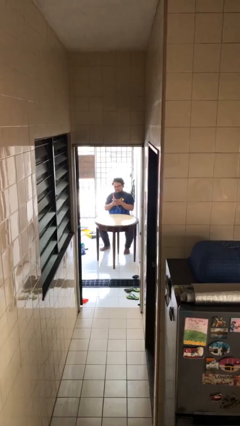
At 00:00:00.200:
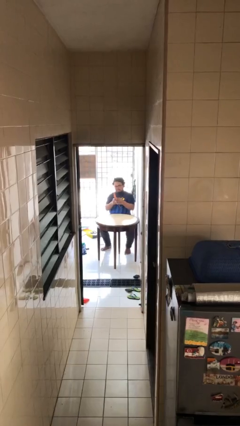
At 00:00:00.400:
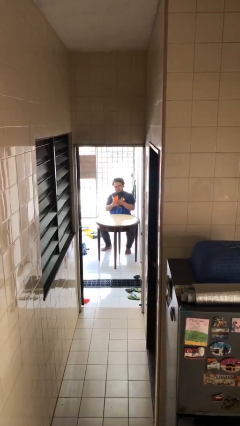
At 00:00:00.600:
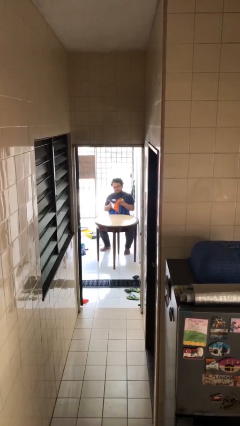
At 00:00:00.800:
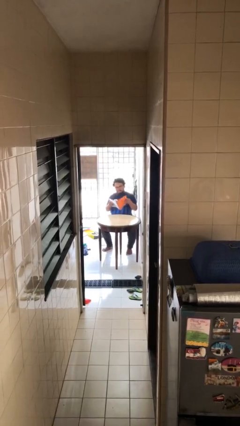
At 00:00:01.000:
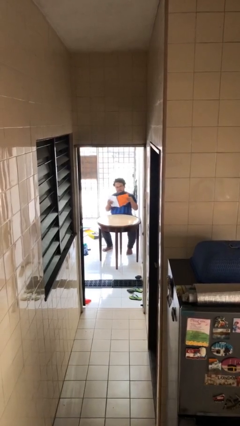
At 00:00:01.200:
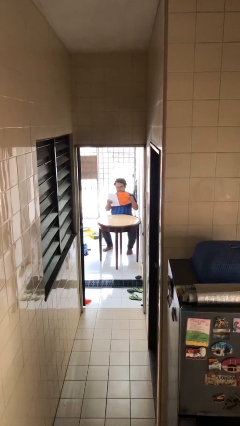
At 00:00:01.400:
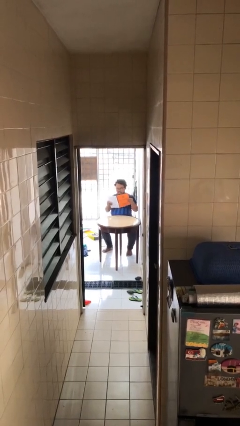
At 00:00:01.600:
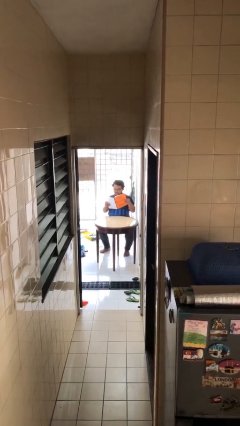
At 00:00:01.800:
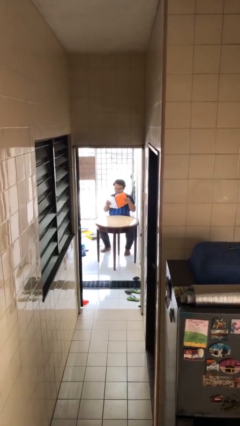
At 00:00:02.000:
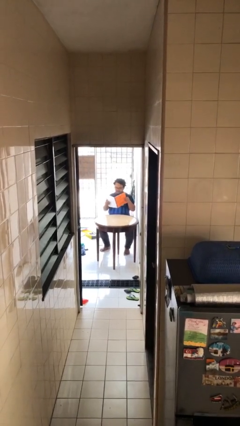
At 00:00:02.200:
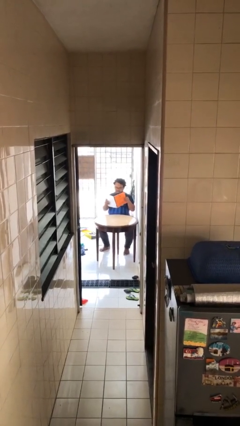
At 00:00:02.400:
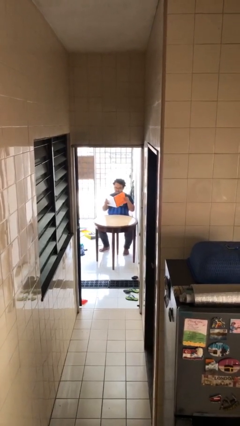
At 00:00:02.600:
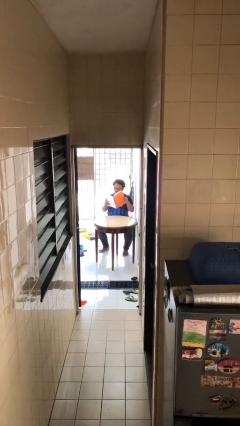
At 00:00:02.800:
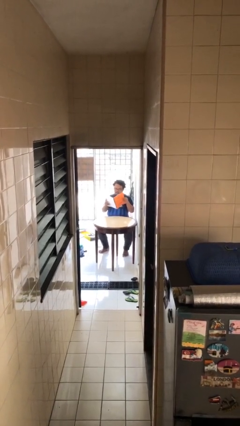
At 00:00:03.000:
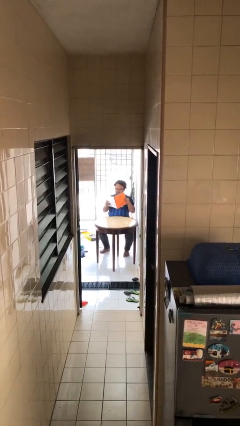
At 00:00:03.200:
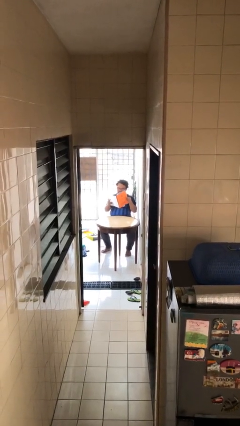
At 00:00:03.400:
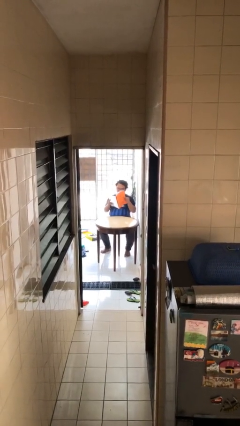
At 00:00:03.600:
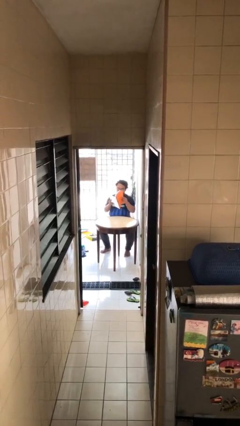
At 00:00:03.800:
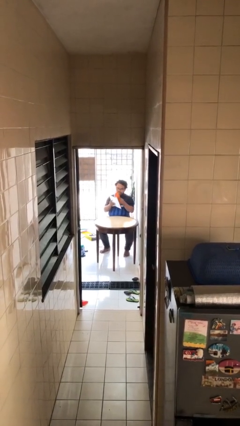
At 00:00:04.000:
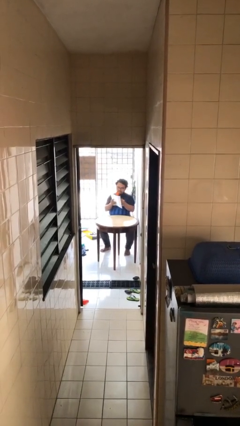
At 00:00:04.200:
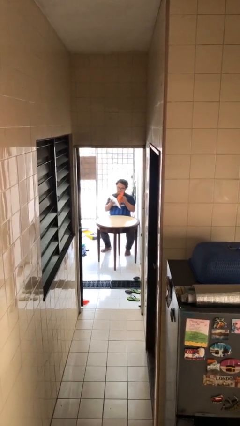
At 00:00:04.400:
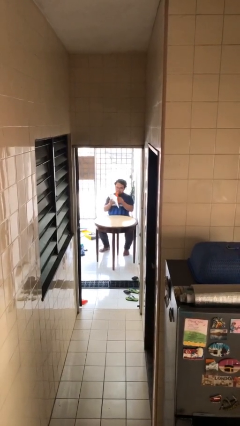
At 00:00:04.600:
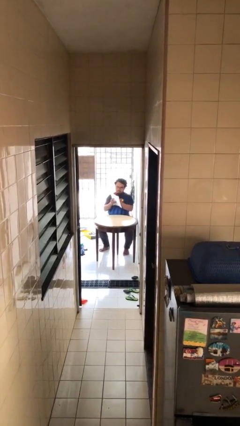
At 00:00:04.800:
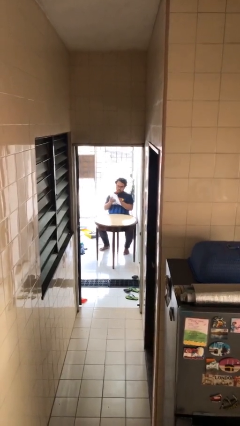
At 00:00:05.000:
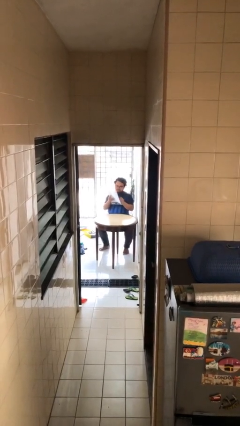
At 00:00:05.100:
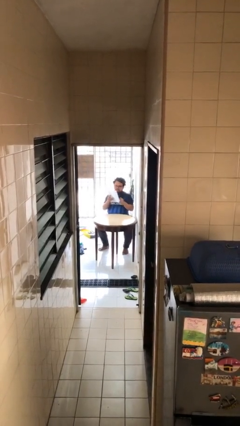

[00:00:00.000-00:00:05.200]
person reads document

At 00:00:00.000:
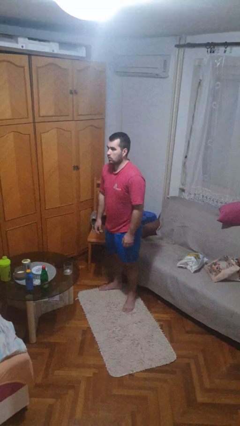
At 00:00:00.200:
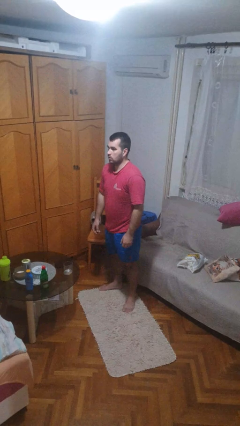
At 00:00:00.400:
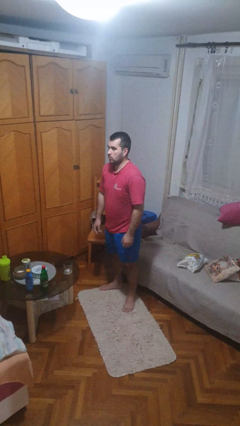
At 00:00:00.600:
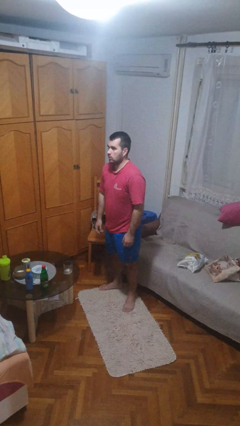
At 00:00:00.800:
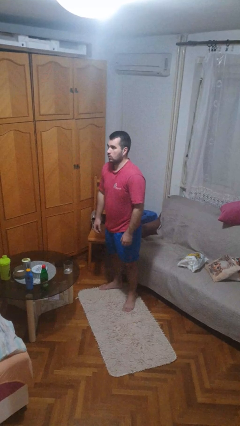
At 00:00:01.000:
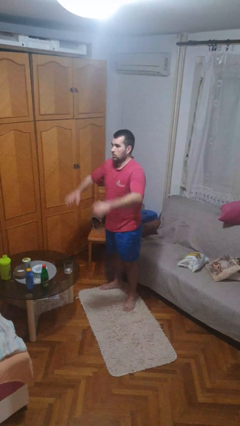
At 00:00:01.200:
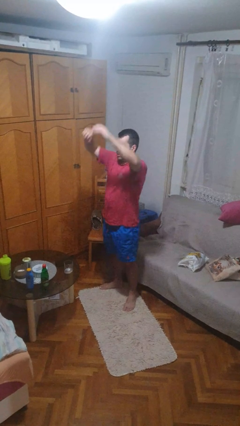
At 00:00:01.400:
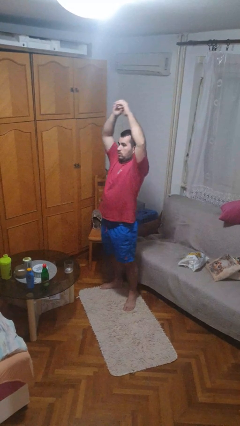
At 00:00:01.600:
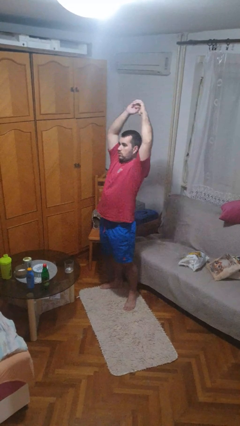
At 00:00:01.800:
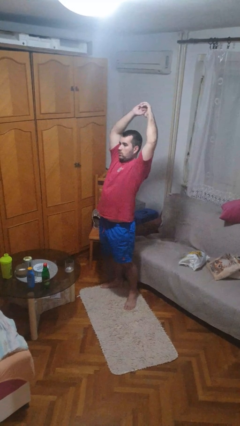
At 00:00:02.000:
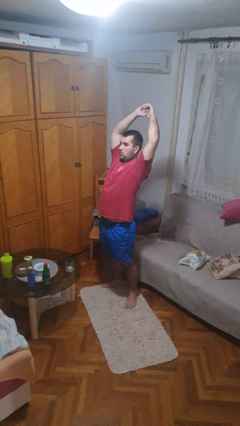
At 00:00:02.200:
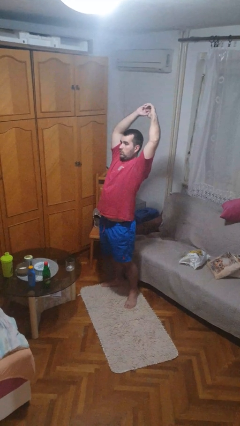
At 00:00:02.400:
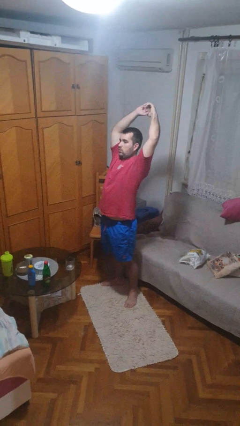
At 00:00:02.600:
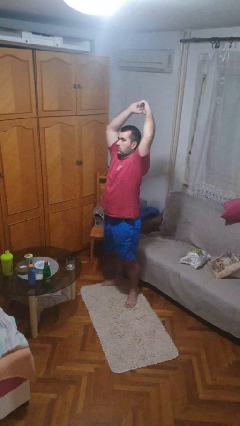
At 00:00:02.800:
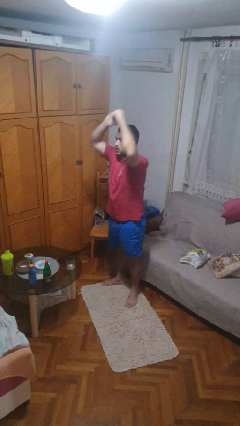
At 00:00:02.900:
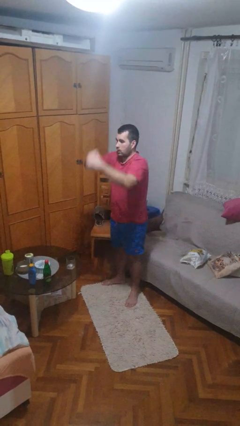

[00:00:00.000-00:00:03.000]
person stretches arms over head

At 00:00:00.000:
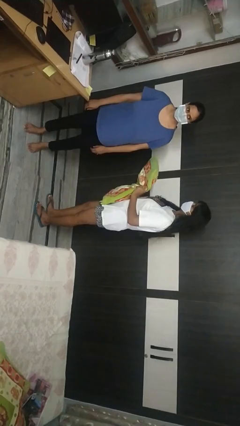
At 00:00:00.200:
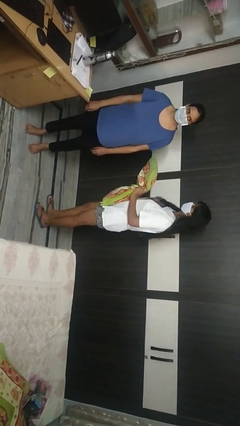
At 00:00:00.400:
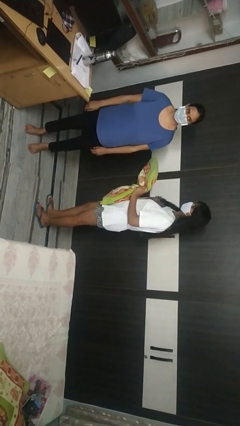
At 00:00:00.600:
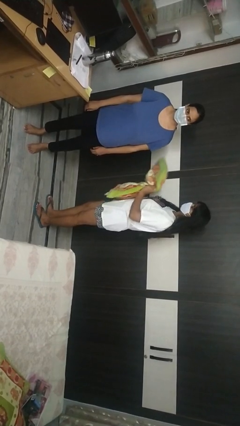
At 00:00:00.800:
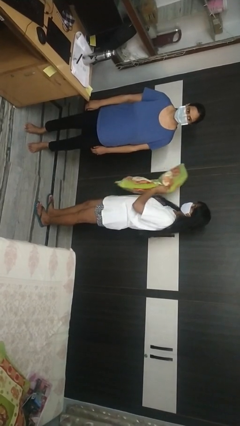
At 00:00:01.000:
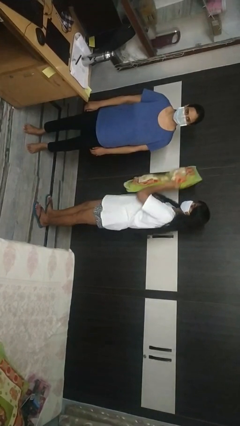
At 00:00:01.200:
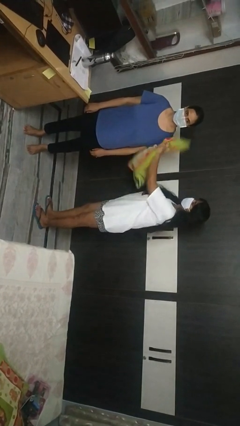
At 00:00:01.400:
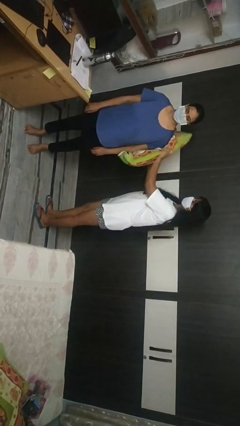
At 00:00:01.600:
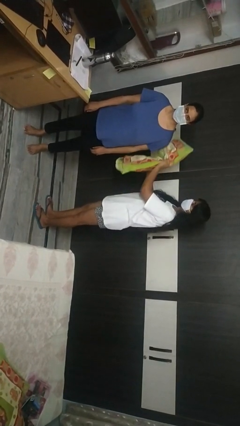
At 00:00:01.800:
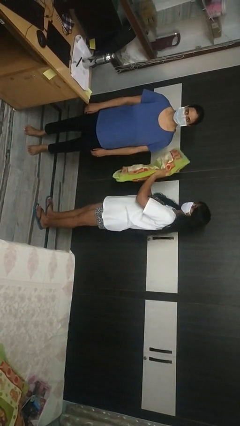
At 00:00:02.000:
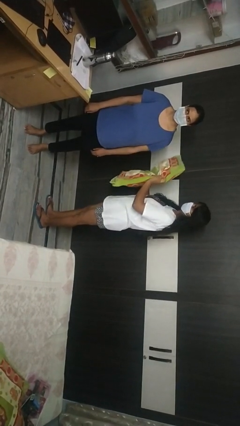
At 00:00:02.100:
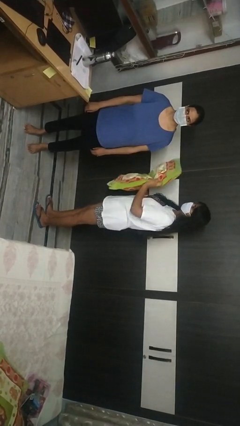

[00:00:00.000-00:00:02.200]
person hits person with pillow

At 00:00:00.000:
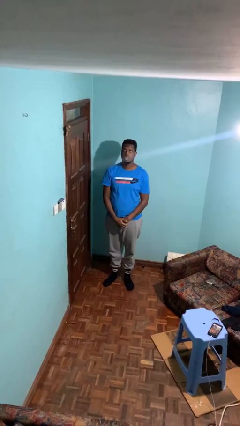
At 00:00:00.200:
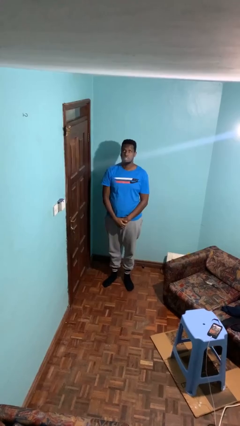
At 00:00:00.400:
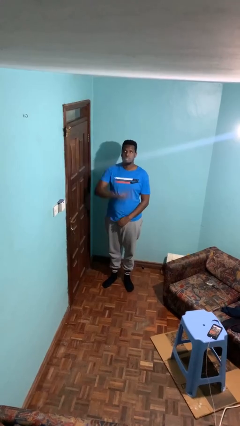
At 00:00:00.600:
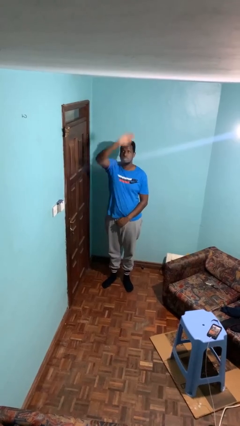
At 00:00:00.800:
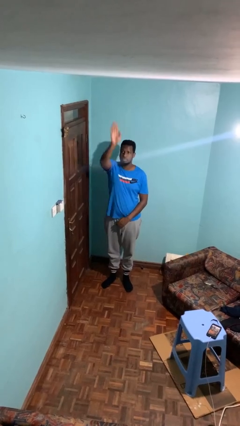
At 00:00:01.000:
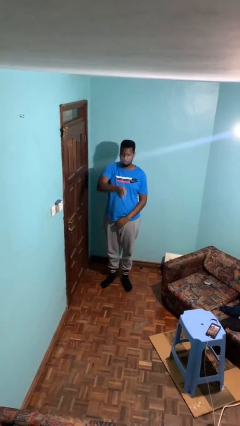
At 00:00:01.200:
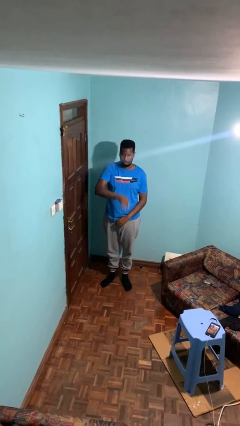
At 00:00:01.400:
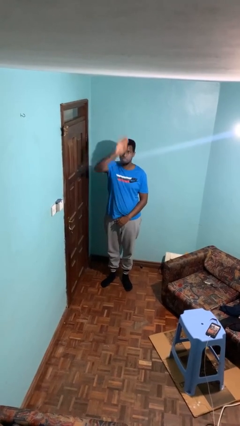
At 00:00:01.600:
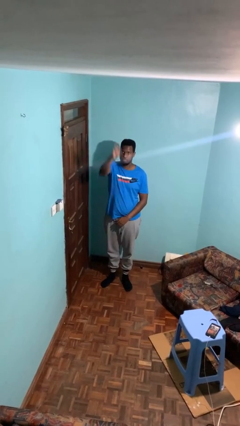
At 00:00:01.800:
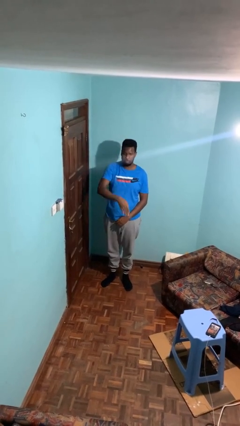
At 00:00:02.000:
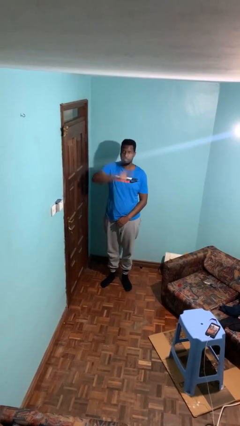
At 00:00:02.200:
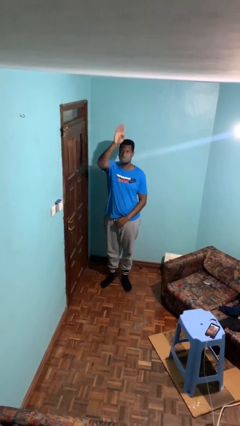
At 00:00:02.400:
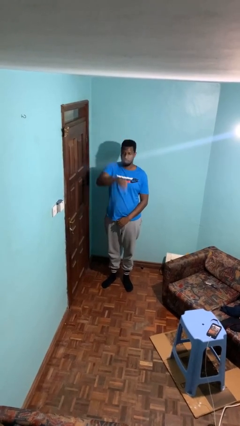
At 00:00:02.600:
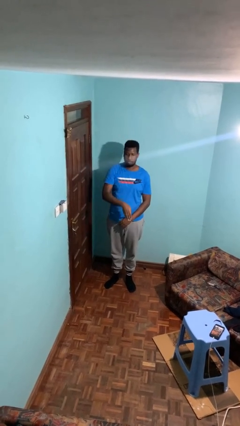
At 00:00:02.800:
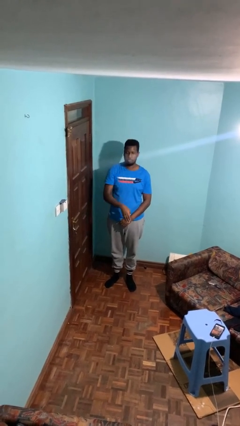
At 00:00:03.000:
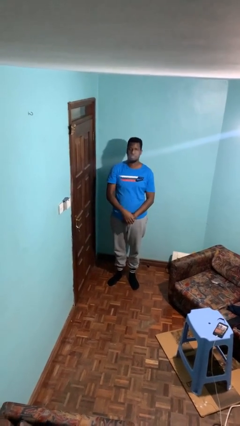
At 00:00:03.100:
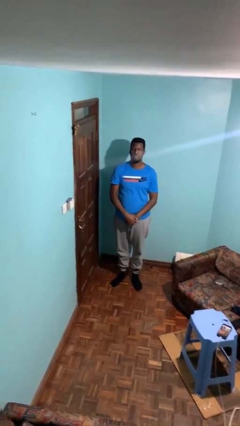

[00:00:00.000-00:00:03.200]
person gestures swipe down

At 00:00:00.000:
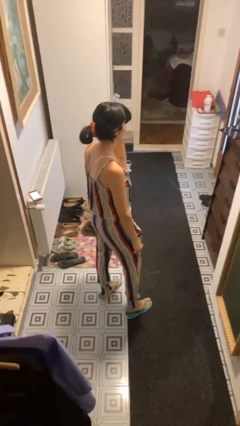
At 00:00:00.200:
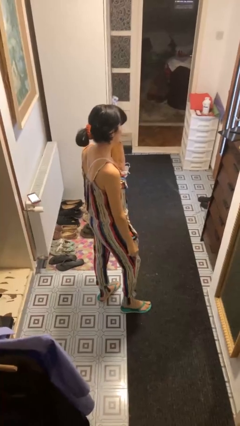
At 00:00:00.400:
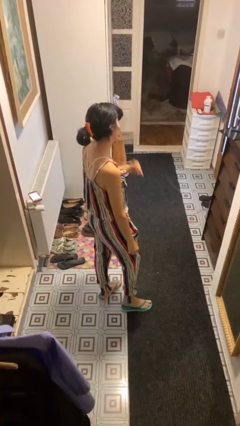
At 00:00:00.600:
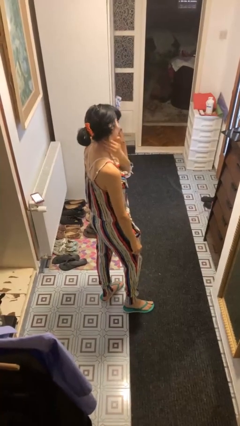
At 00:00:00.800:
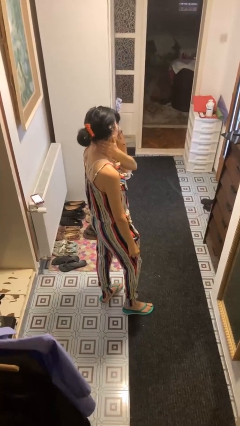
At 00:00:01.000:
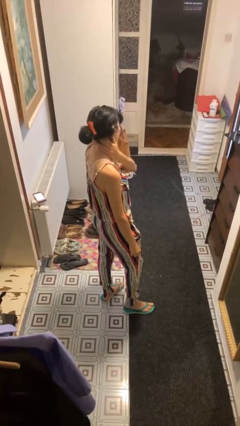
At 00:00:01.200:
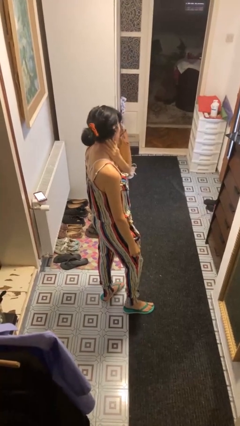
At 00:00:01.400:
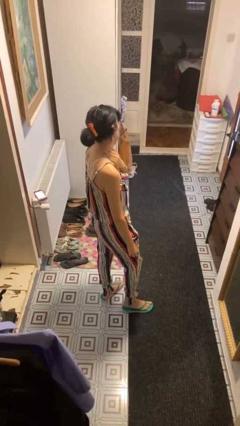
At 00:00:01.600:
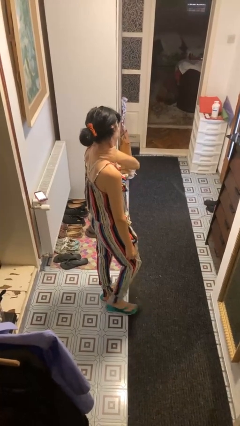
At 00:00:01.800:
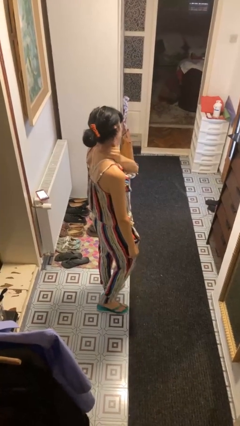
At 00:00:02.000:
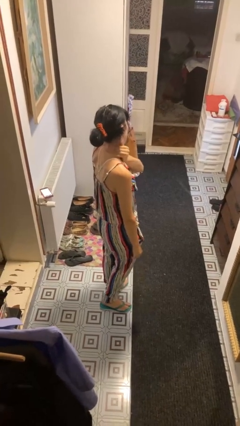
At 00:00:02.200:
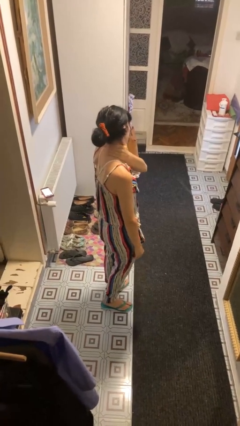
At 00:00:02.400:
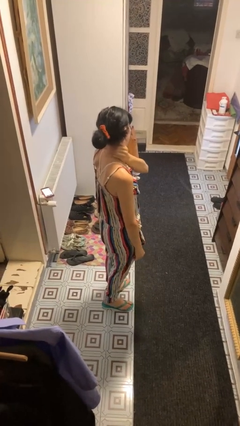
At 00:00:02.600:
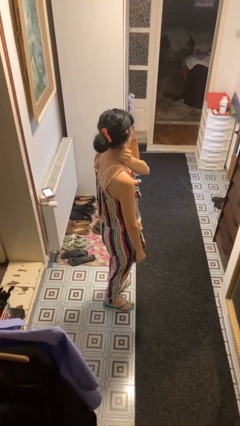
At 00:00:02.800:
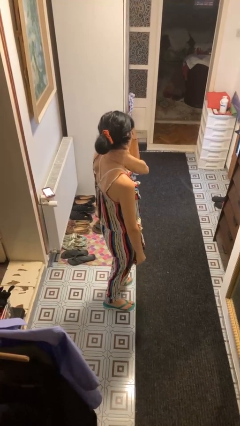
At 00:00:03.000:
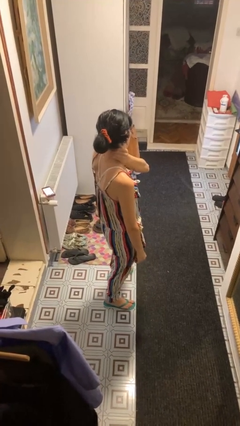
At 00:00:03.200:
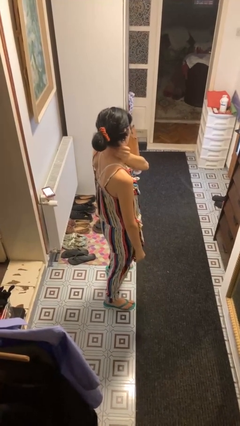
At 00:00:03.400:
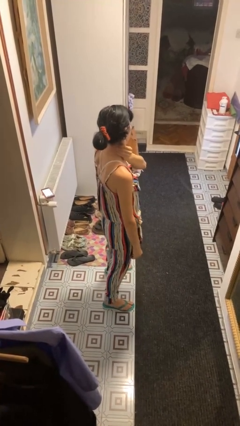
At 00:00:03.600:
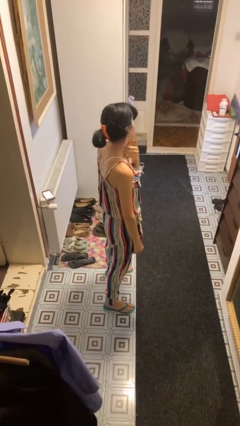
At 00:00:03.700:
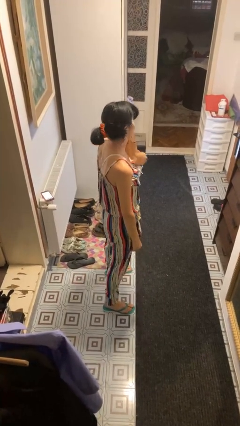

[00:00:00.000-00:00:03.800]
person rubs neck
